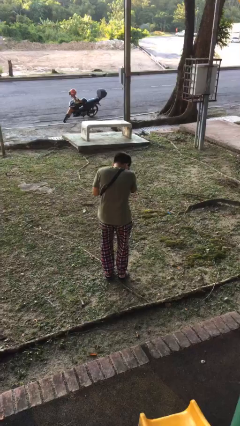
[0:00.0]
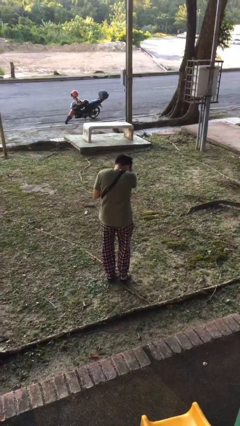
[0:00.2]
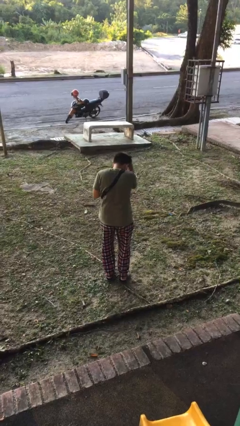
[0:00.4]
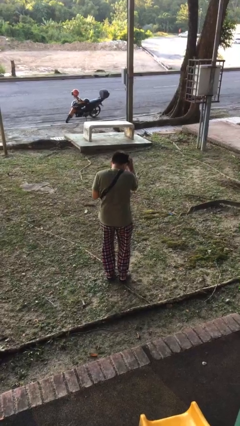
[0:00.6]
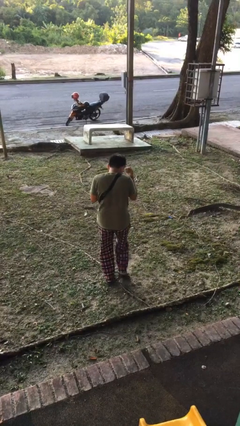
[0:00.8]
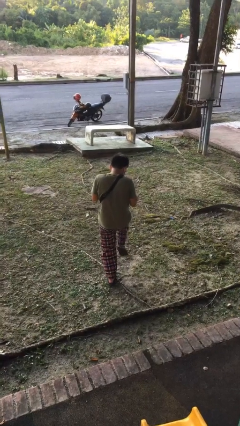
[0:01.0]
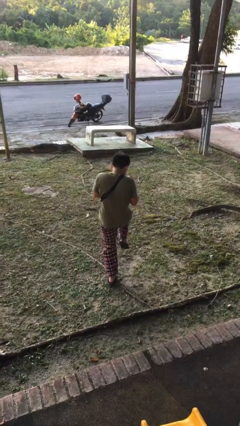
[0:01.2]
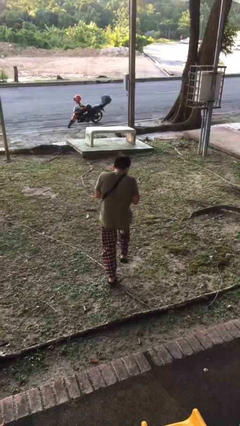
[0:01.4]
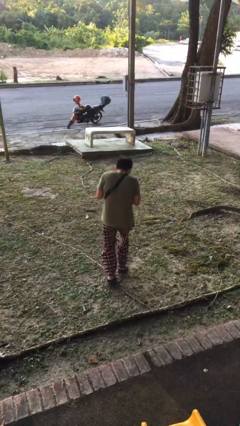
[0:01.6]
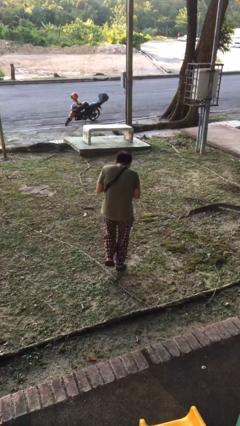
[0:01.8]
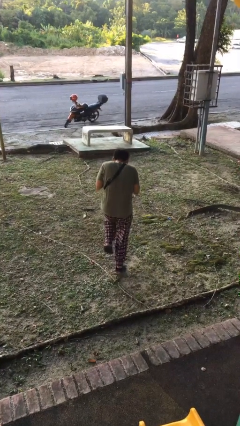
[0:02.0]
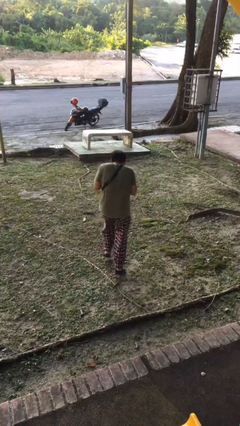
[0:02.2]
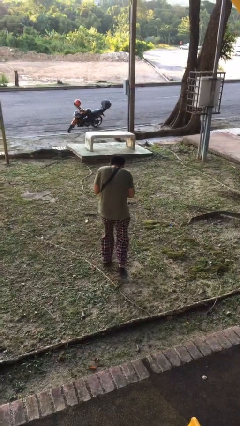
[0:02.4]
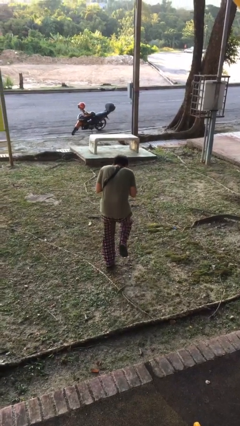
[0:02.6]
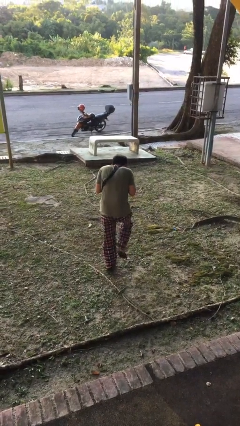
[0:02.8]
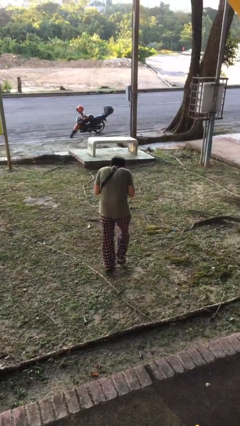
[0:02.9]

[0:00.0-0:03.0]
person walks tiptoe

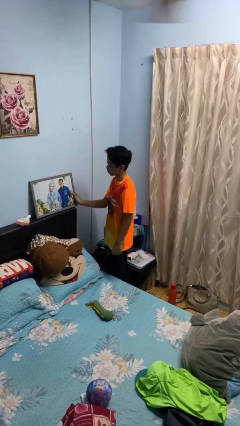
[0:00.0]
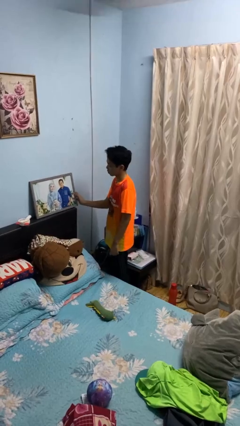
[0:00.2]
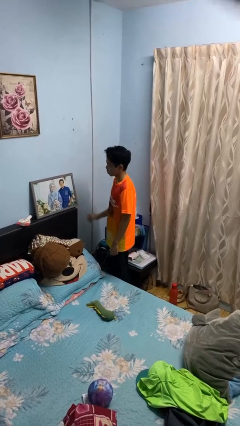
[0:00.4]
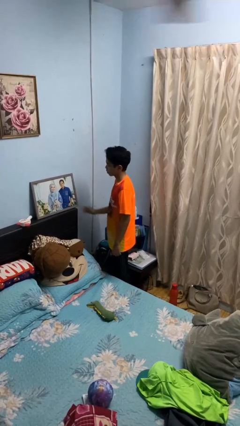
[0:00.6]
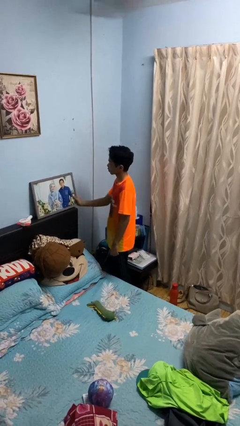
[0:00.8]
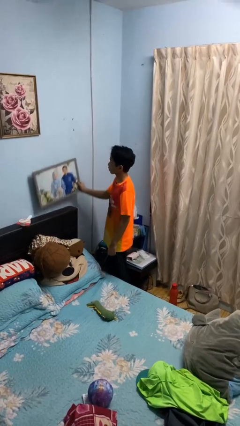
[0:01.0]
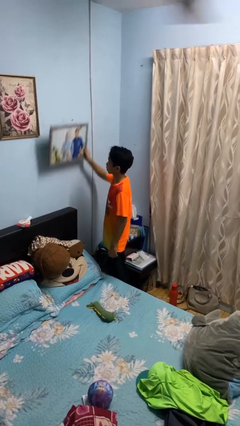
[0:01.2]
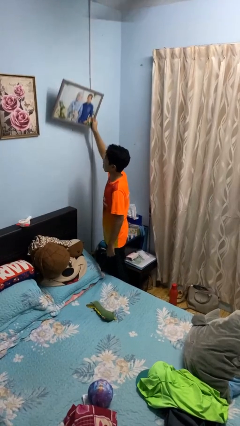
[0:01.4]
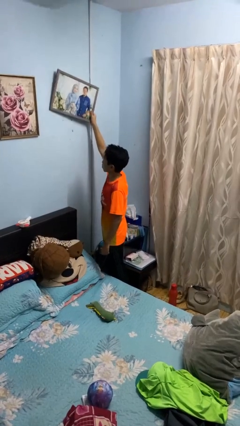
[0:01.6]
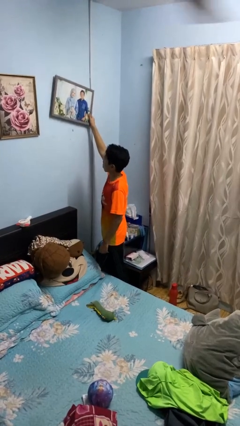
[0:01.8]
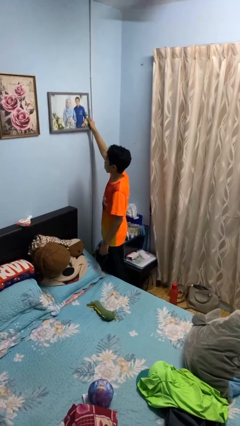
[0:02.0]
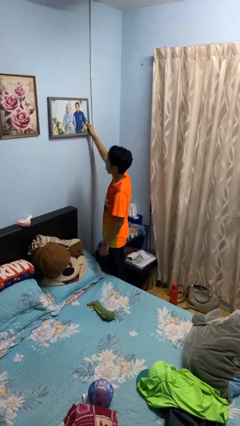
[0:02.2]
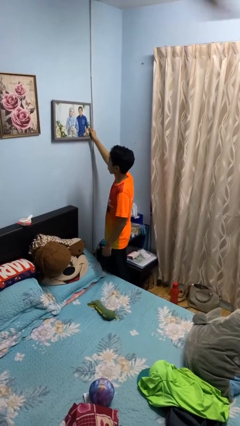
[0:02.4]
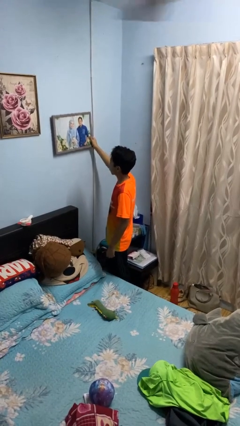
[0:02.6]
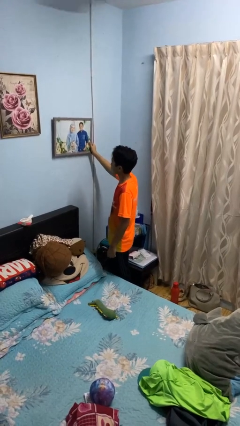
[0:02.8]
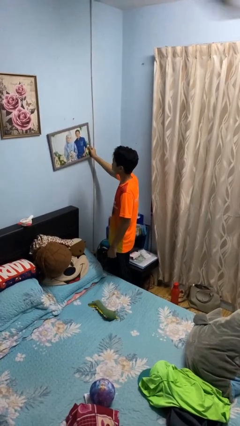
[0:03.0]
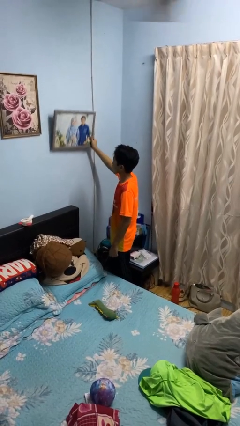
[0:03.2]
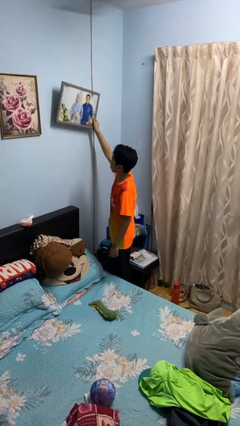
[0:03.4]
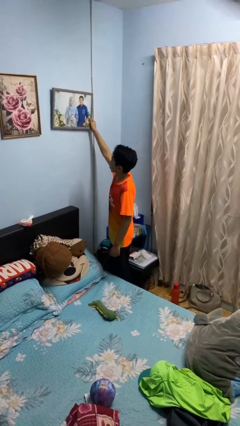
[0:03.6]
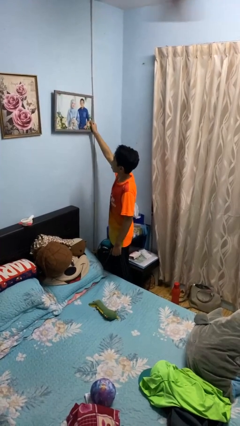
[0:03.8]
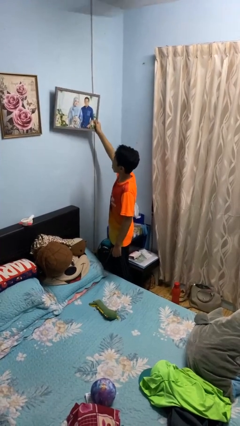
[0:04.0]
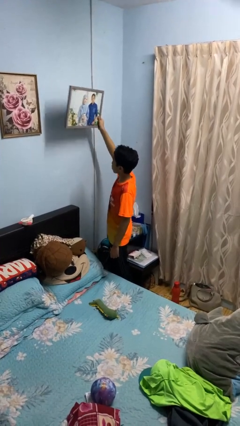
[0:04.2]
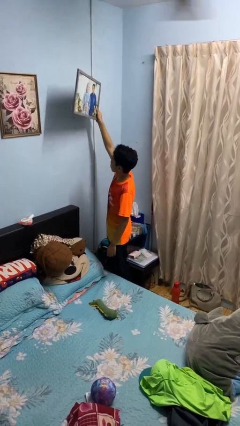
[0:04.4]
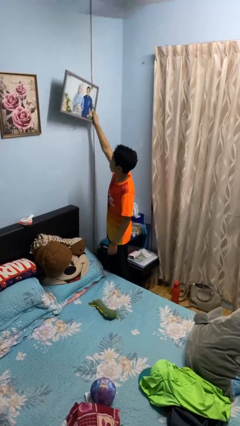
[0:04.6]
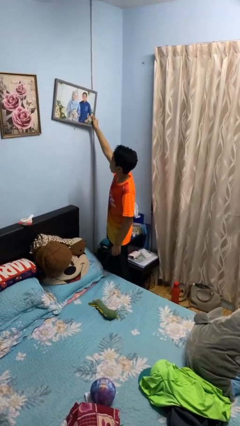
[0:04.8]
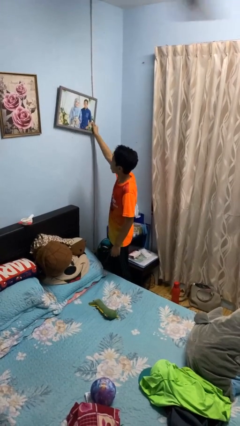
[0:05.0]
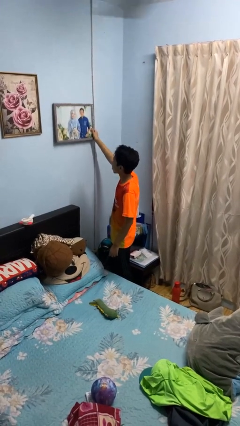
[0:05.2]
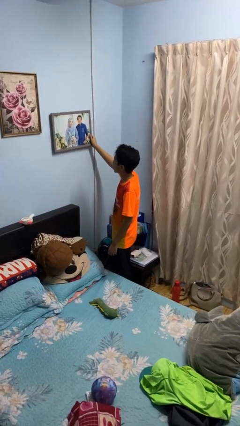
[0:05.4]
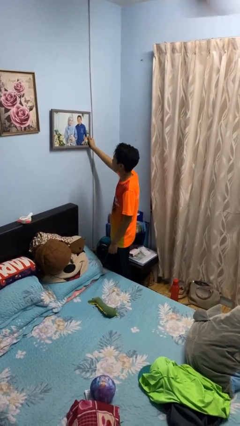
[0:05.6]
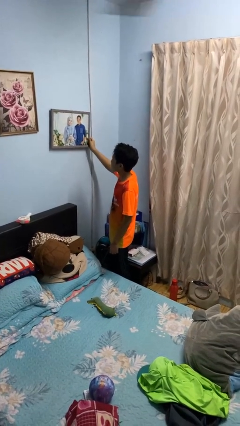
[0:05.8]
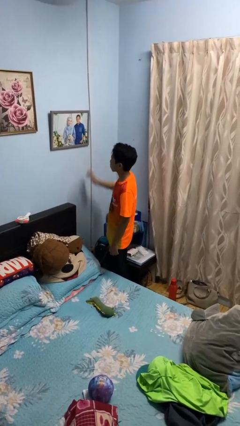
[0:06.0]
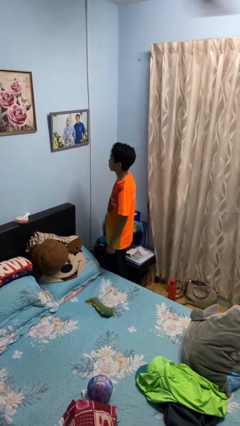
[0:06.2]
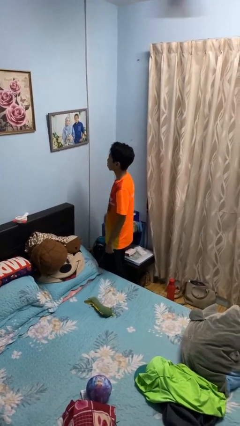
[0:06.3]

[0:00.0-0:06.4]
person puts up picture frame

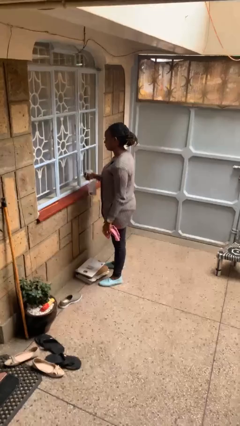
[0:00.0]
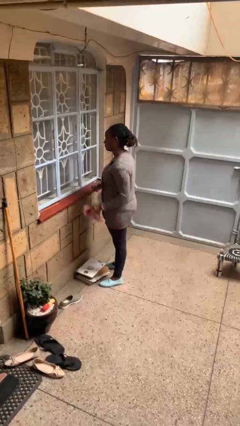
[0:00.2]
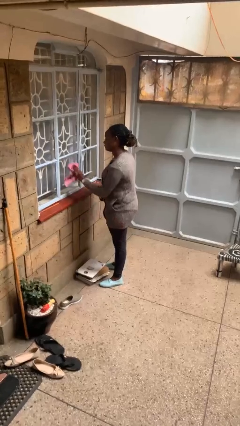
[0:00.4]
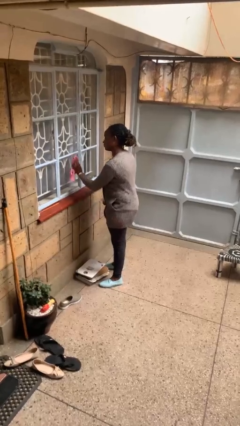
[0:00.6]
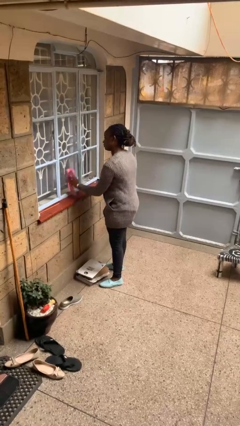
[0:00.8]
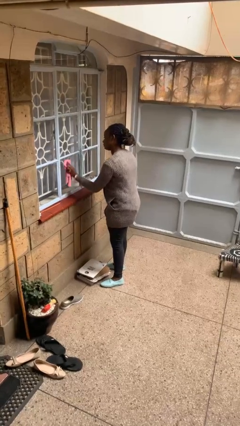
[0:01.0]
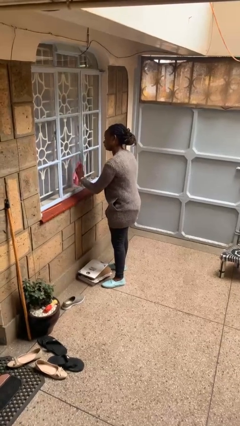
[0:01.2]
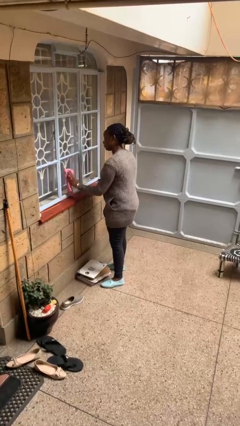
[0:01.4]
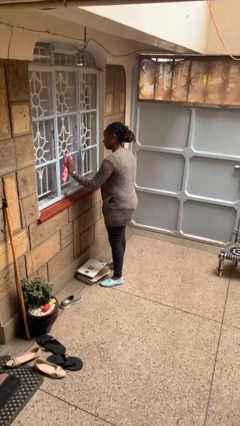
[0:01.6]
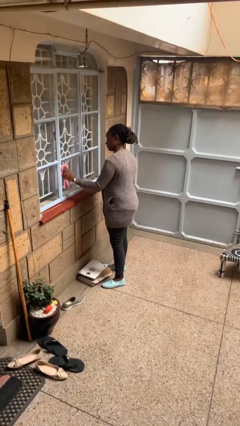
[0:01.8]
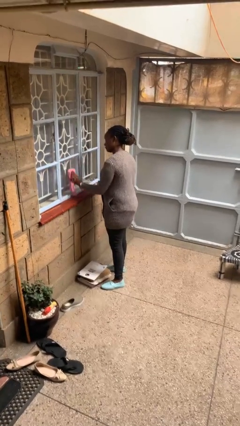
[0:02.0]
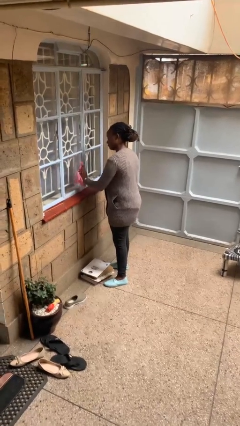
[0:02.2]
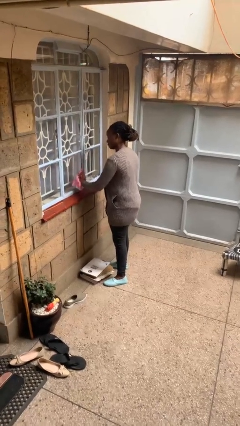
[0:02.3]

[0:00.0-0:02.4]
person washes window

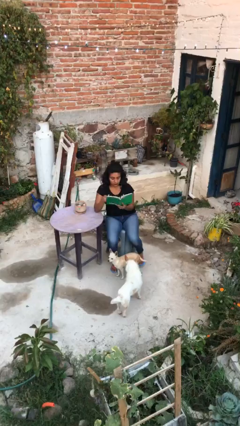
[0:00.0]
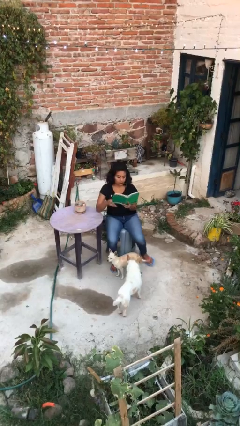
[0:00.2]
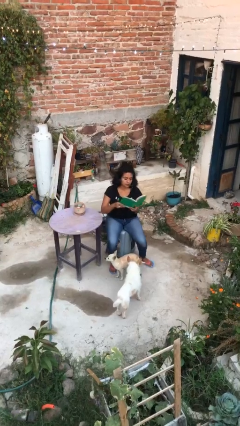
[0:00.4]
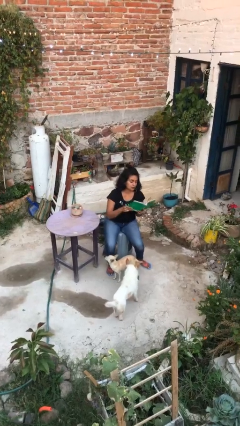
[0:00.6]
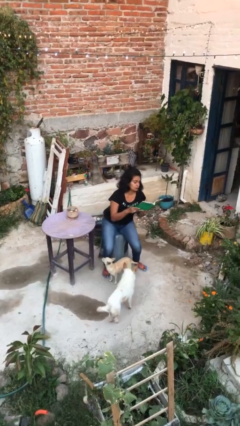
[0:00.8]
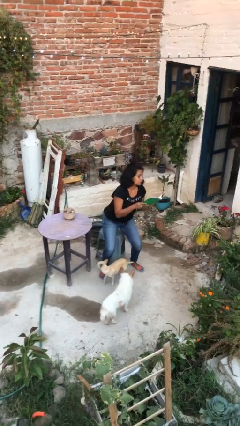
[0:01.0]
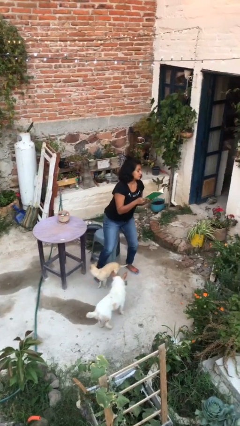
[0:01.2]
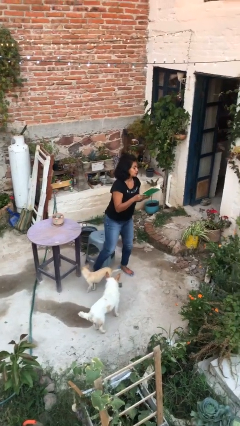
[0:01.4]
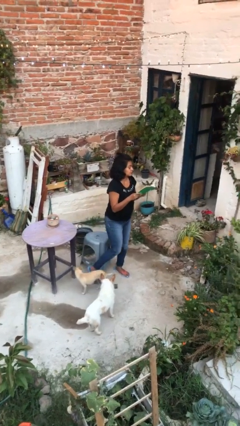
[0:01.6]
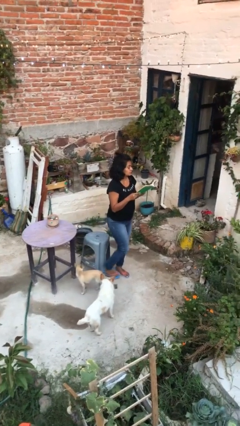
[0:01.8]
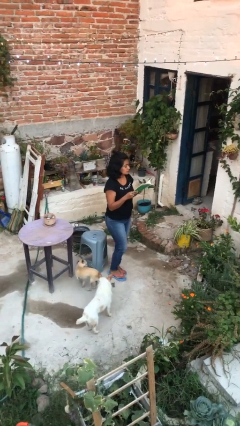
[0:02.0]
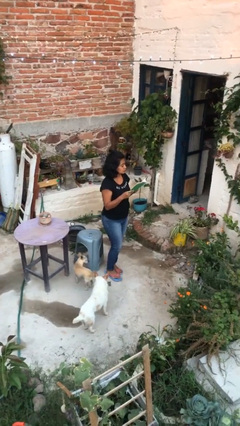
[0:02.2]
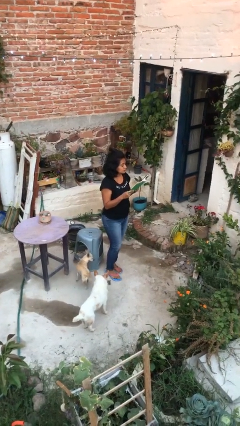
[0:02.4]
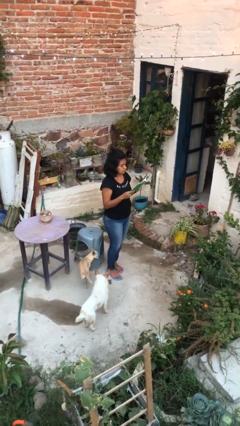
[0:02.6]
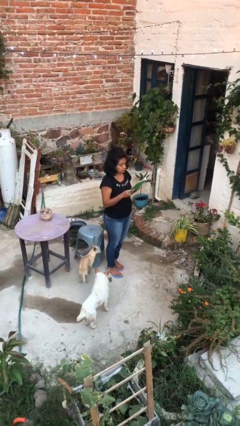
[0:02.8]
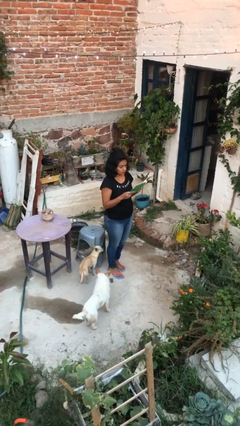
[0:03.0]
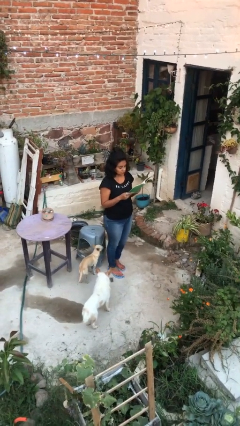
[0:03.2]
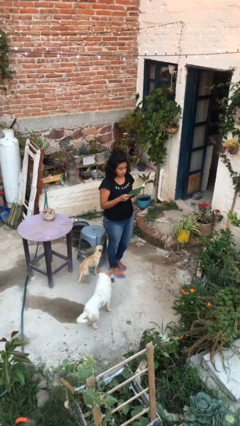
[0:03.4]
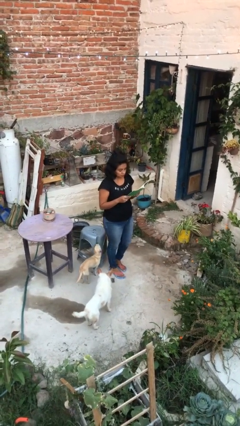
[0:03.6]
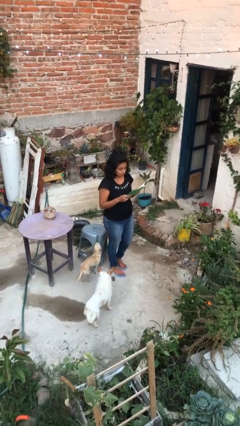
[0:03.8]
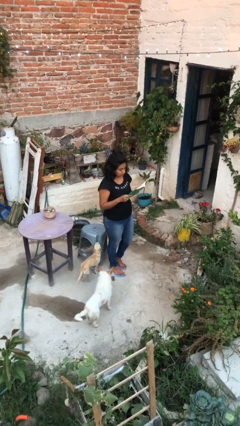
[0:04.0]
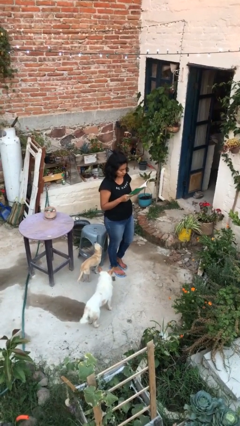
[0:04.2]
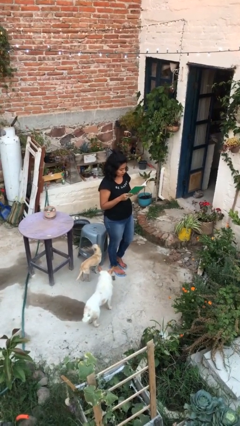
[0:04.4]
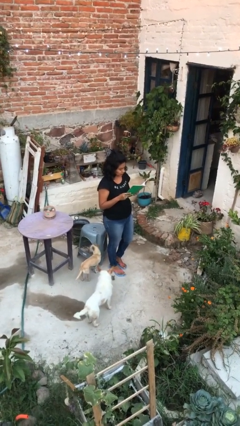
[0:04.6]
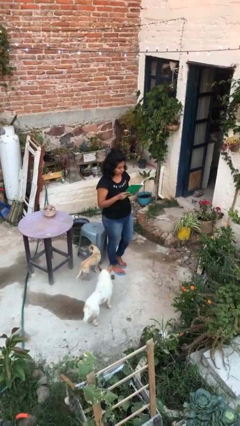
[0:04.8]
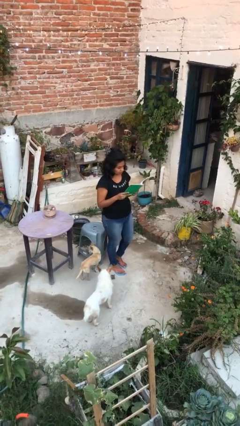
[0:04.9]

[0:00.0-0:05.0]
person stands up

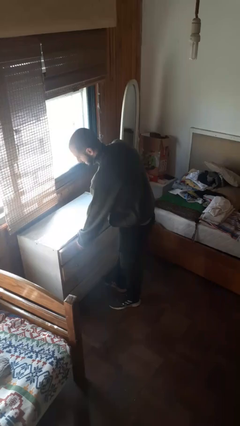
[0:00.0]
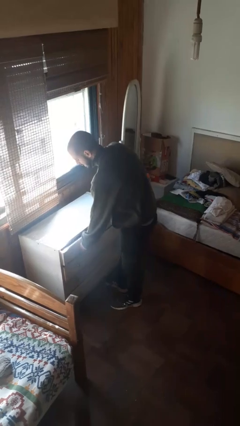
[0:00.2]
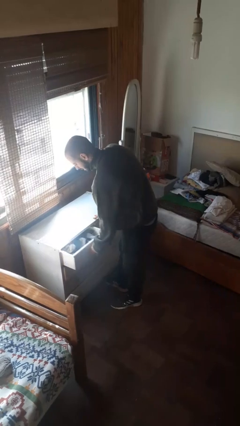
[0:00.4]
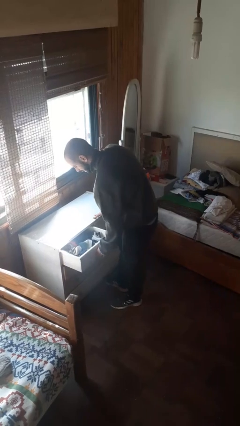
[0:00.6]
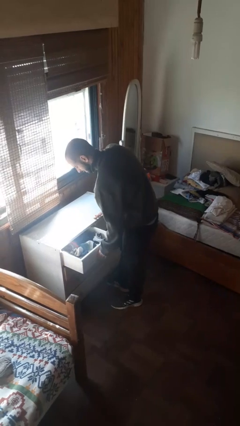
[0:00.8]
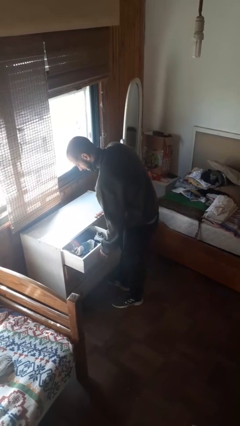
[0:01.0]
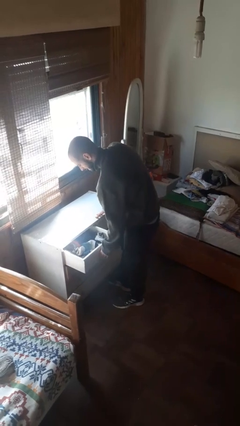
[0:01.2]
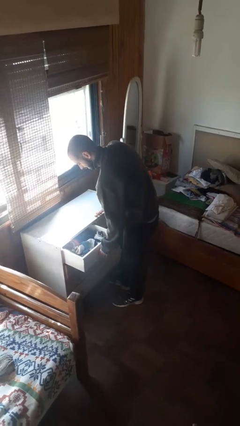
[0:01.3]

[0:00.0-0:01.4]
person opens dresser drawer
